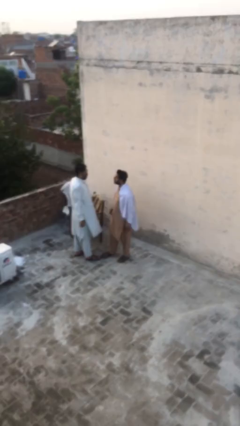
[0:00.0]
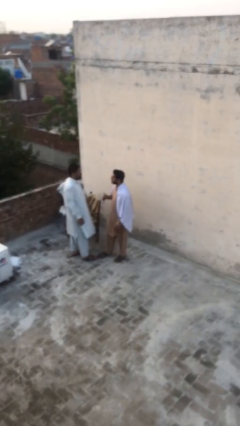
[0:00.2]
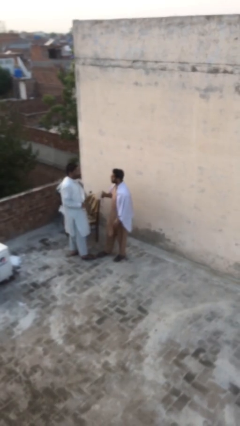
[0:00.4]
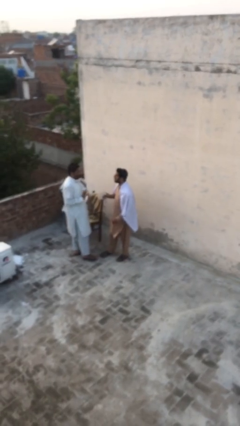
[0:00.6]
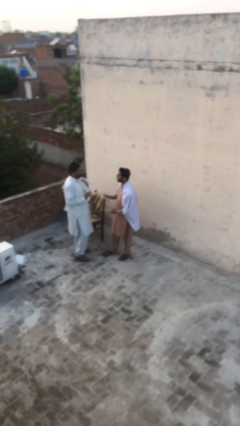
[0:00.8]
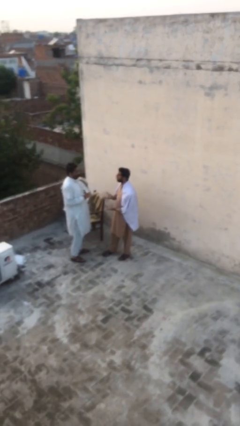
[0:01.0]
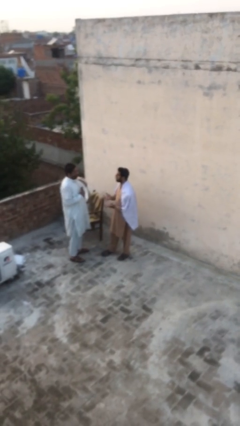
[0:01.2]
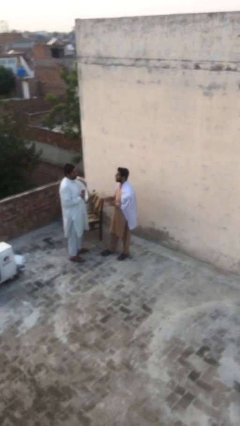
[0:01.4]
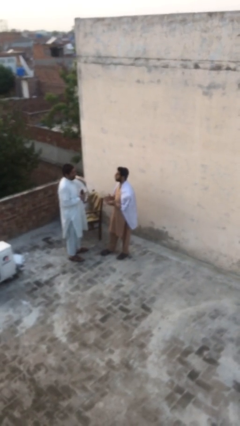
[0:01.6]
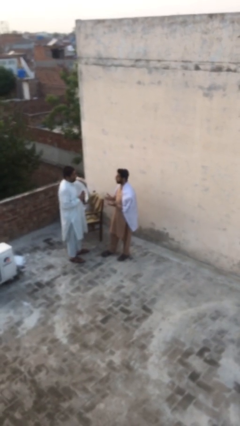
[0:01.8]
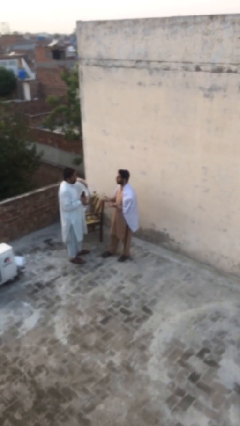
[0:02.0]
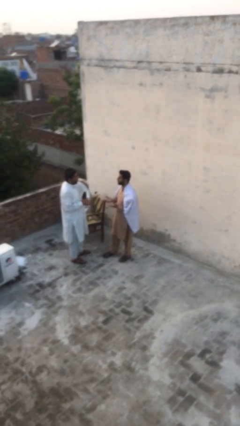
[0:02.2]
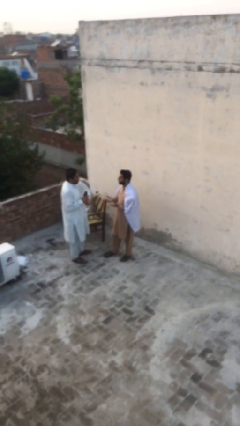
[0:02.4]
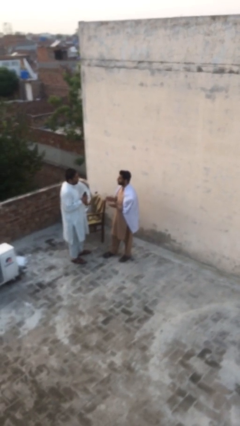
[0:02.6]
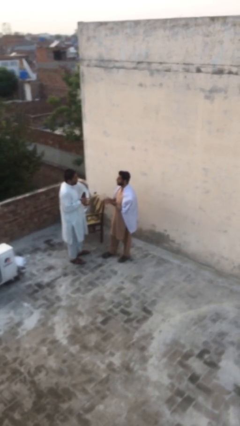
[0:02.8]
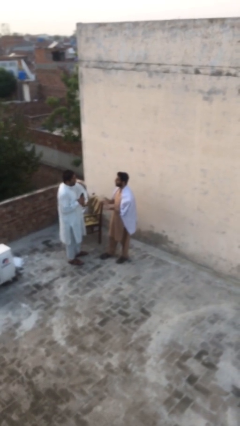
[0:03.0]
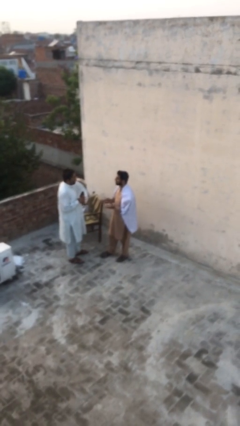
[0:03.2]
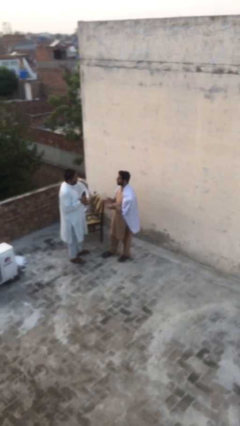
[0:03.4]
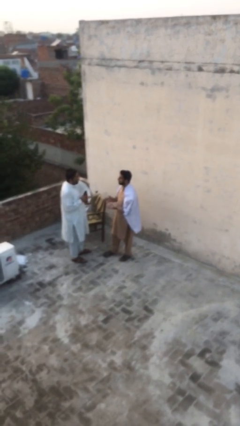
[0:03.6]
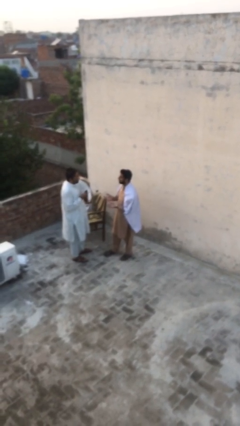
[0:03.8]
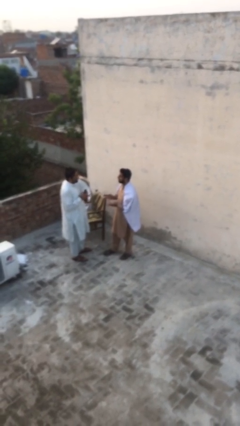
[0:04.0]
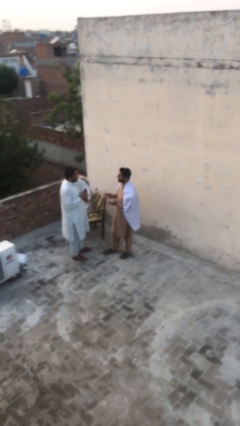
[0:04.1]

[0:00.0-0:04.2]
person talks to person

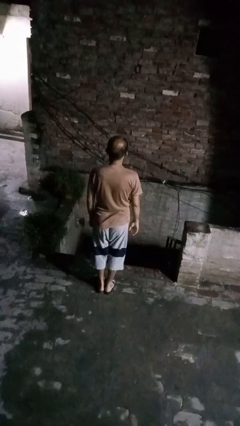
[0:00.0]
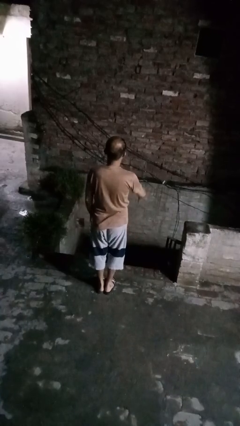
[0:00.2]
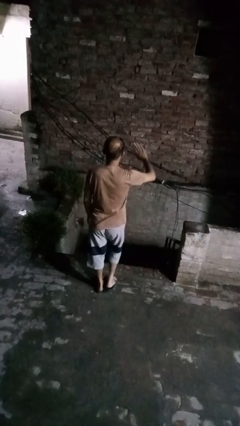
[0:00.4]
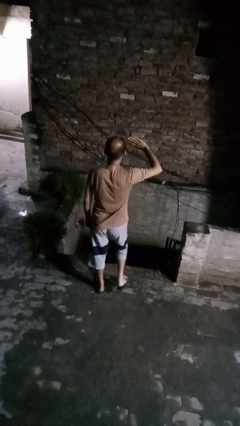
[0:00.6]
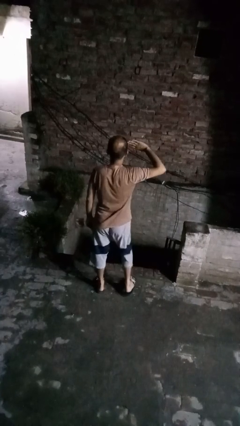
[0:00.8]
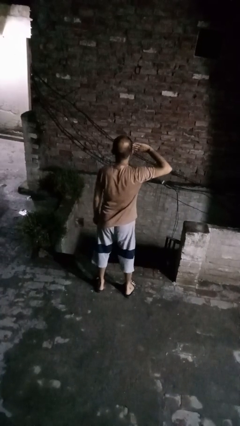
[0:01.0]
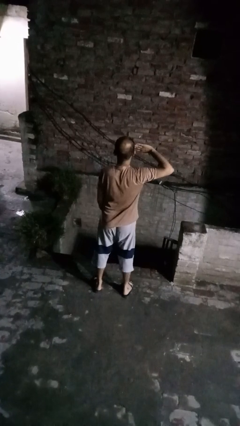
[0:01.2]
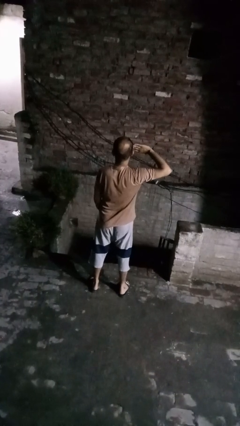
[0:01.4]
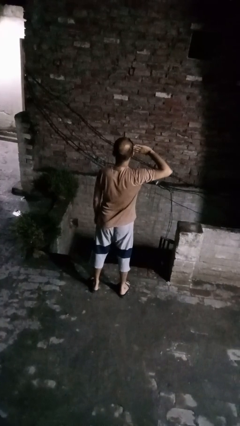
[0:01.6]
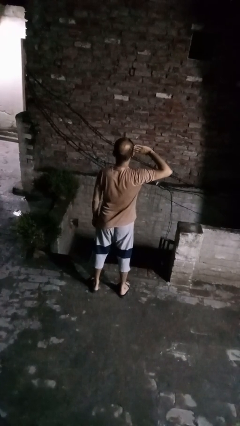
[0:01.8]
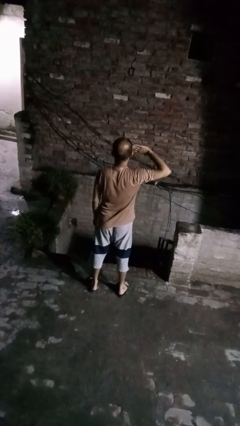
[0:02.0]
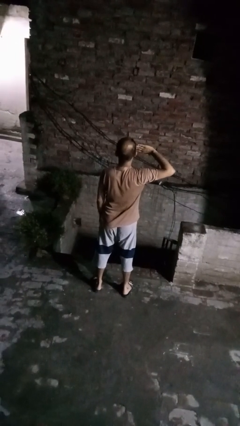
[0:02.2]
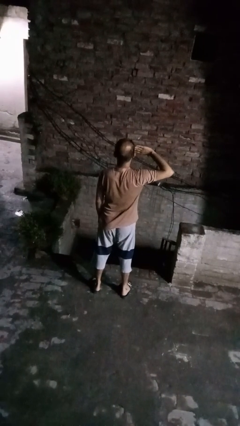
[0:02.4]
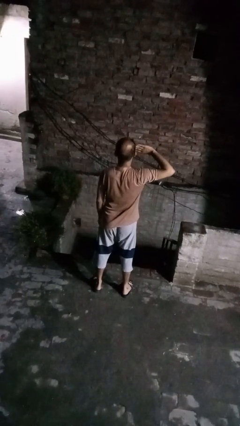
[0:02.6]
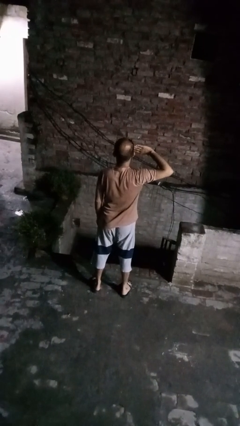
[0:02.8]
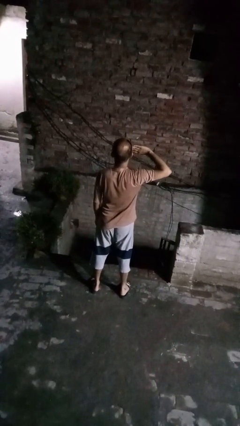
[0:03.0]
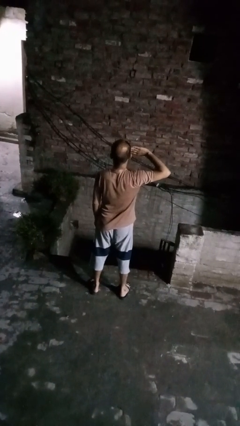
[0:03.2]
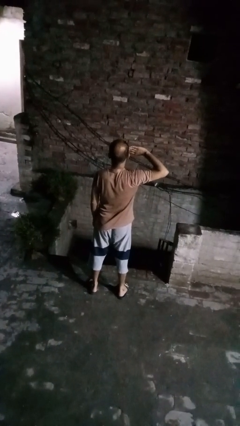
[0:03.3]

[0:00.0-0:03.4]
person salutes

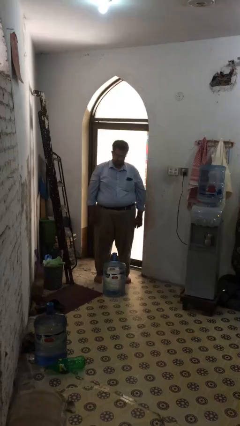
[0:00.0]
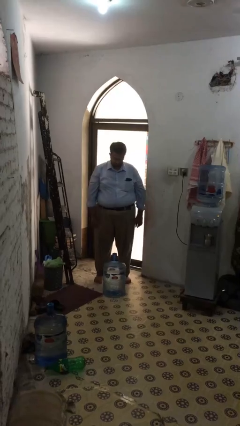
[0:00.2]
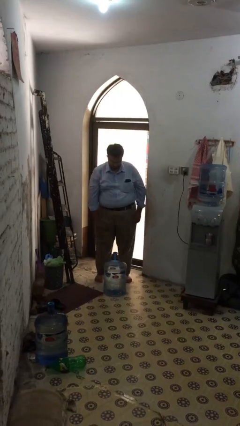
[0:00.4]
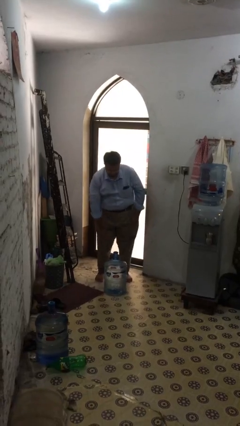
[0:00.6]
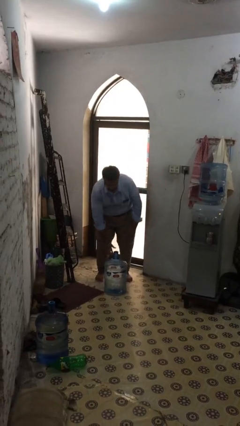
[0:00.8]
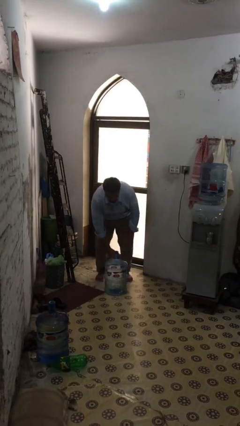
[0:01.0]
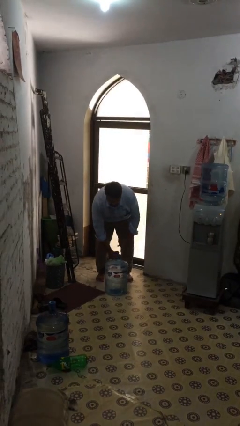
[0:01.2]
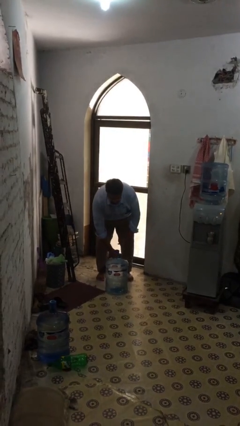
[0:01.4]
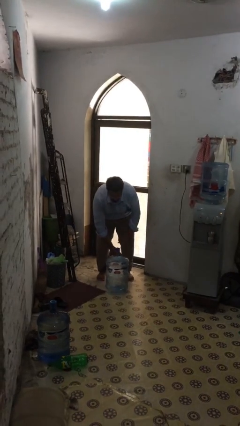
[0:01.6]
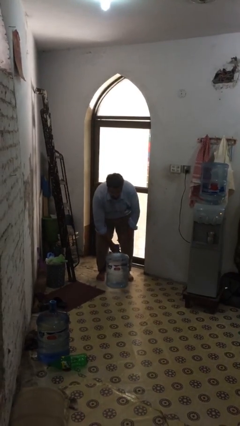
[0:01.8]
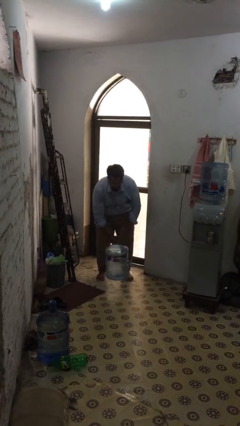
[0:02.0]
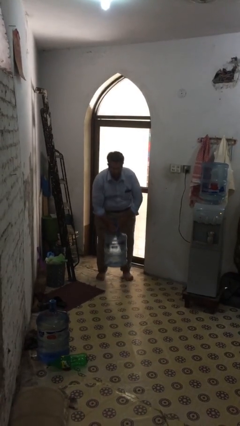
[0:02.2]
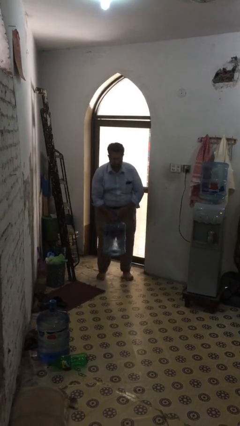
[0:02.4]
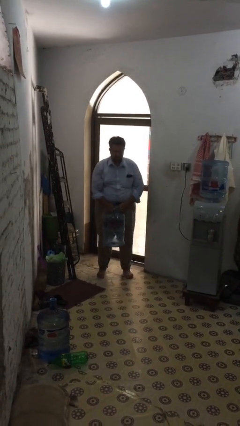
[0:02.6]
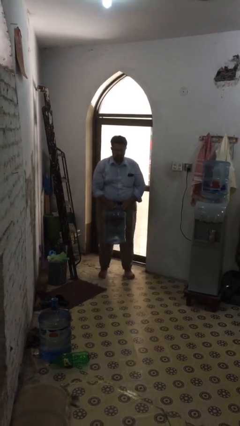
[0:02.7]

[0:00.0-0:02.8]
person picks up object from floor

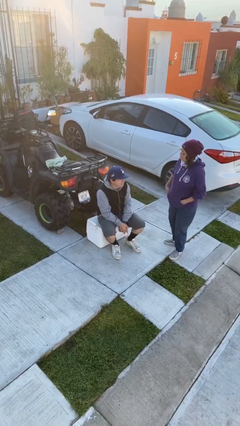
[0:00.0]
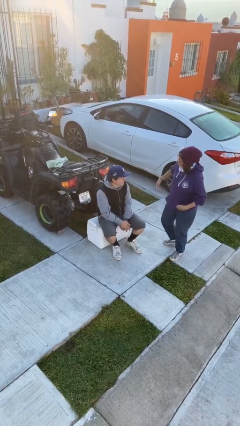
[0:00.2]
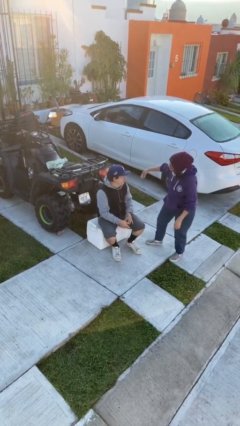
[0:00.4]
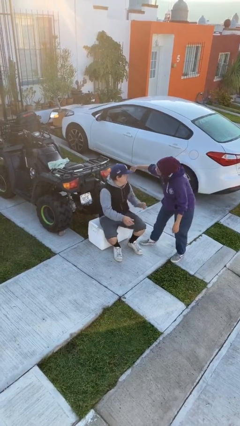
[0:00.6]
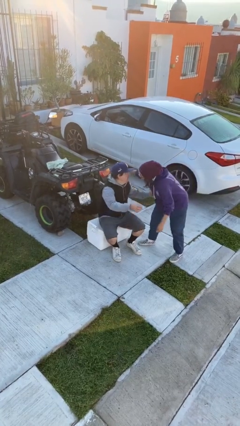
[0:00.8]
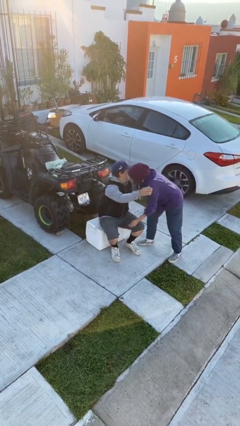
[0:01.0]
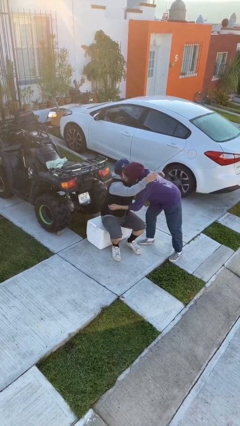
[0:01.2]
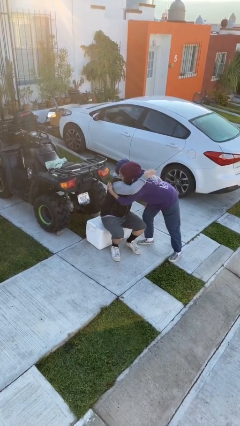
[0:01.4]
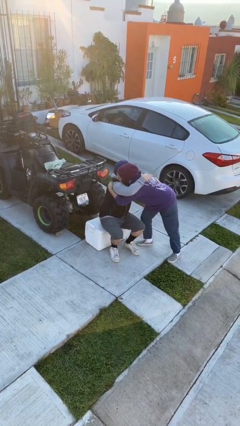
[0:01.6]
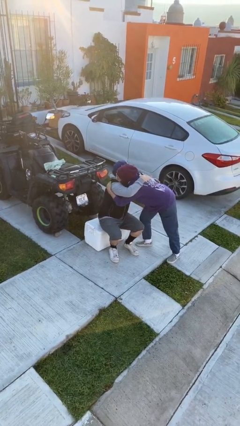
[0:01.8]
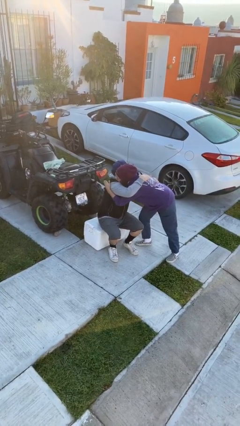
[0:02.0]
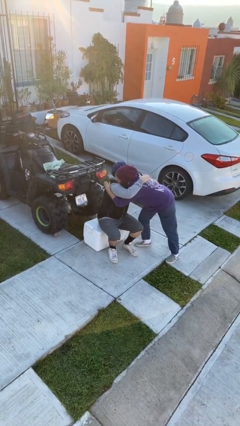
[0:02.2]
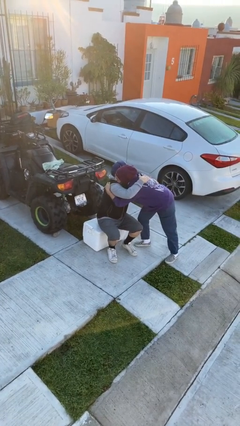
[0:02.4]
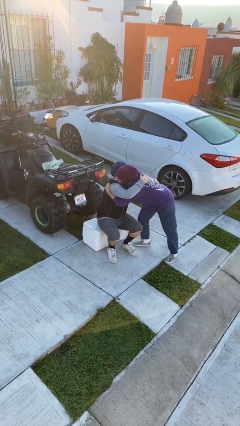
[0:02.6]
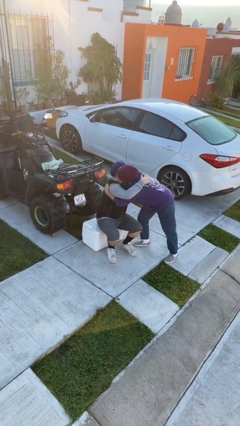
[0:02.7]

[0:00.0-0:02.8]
person embraces person

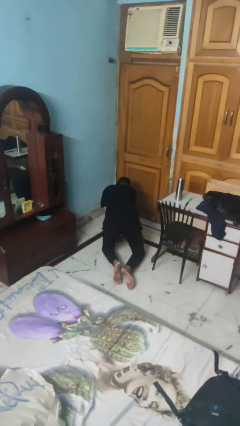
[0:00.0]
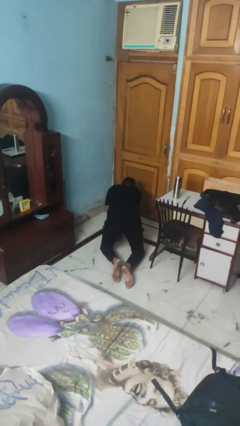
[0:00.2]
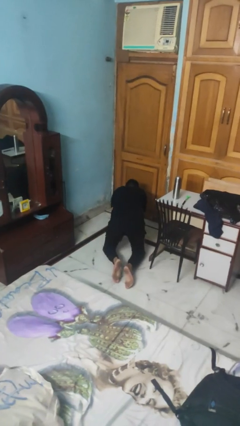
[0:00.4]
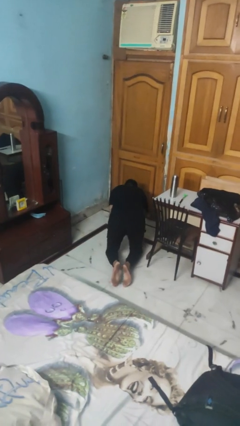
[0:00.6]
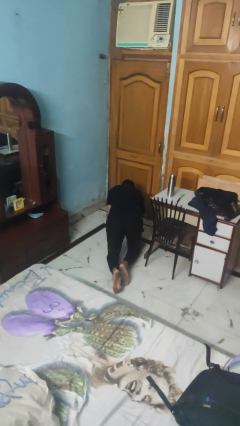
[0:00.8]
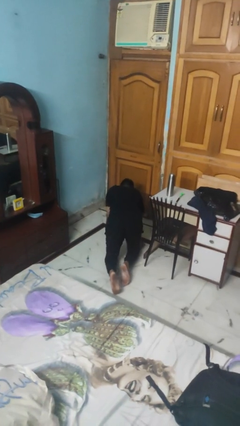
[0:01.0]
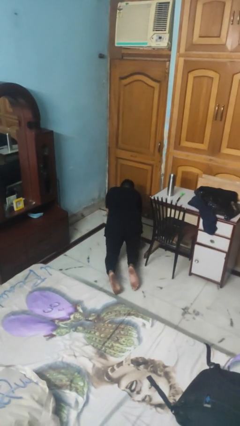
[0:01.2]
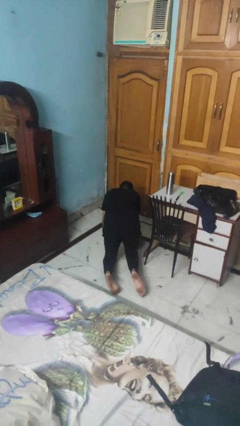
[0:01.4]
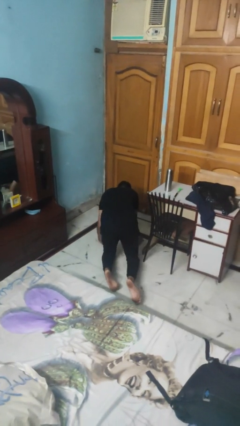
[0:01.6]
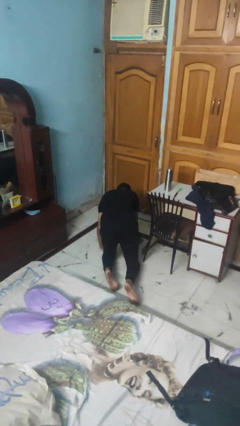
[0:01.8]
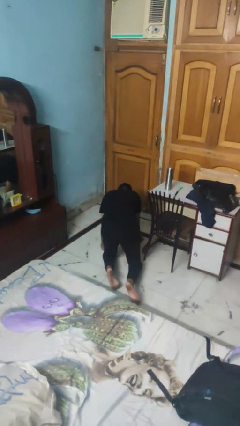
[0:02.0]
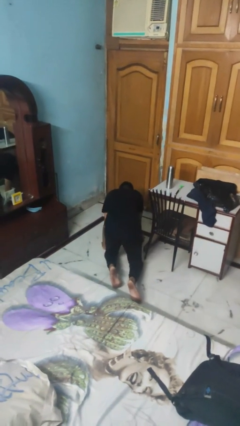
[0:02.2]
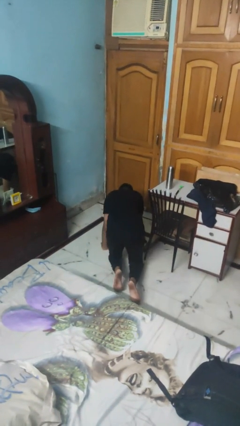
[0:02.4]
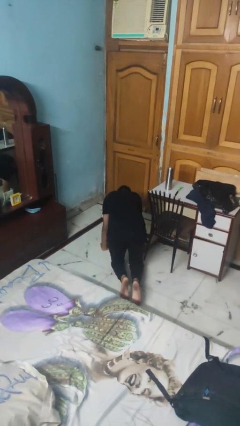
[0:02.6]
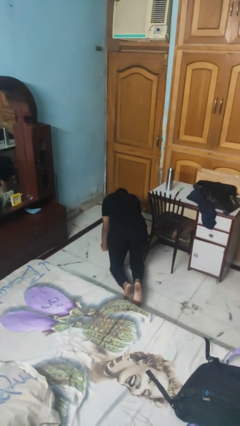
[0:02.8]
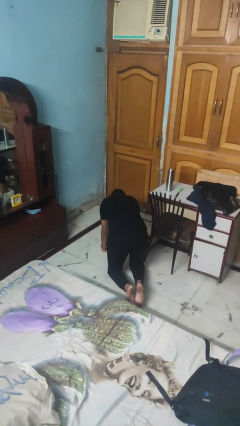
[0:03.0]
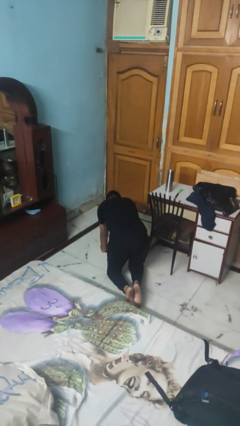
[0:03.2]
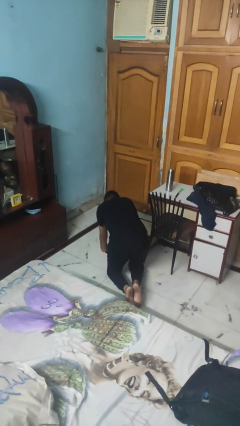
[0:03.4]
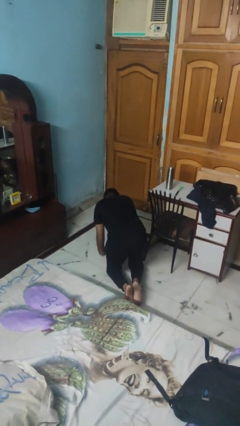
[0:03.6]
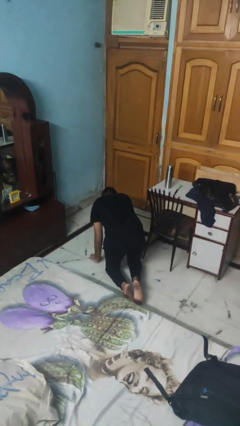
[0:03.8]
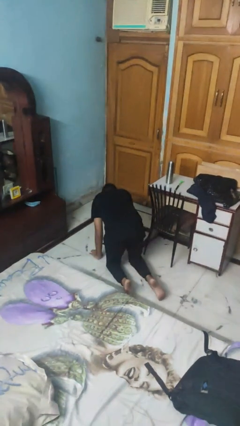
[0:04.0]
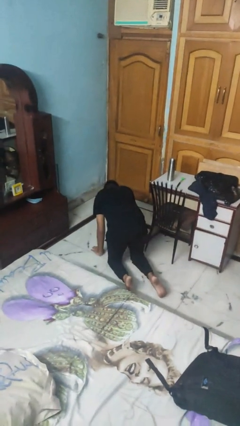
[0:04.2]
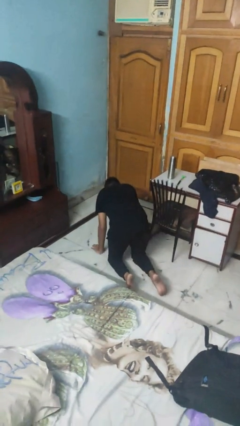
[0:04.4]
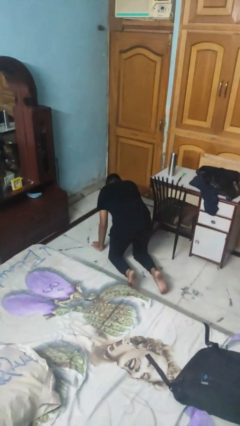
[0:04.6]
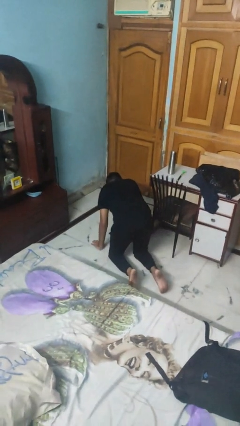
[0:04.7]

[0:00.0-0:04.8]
person crawls
